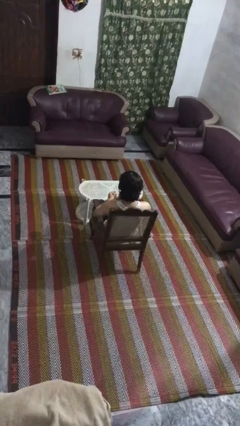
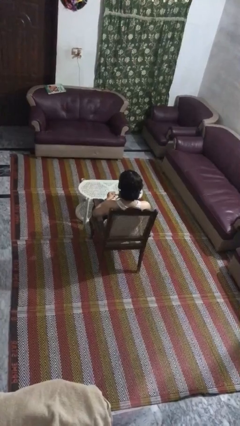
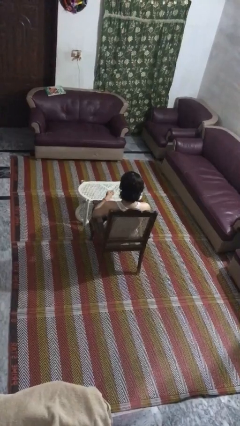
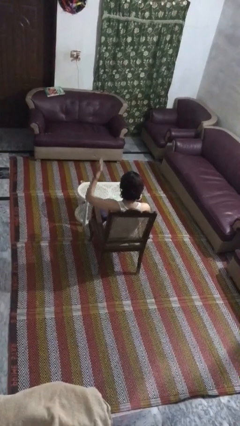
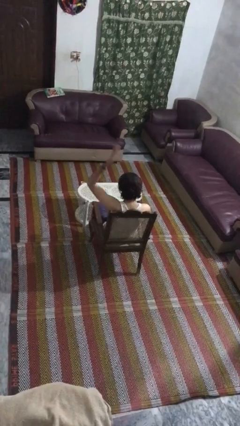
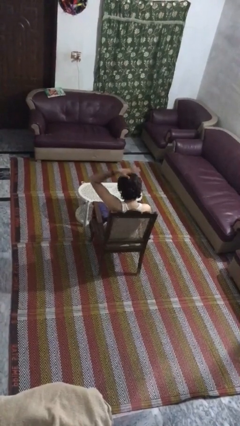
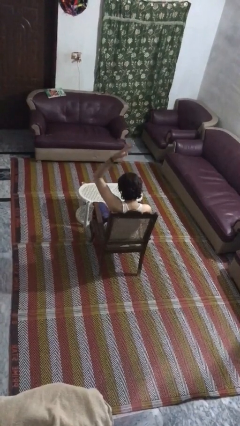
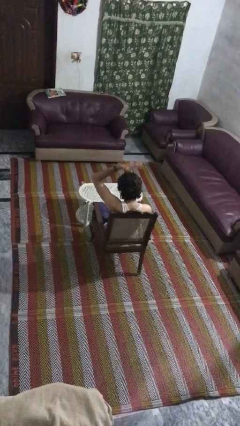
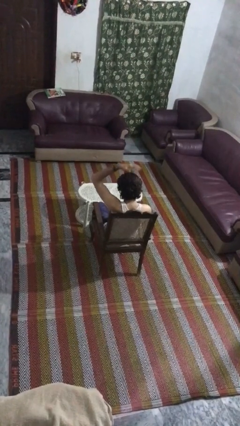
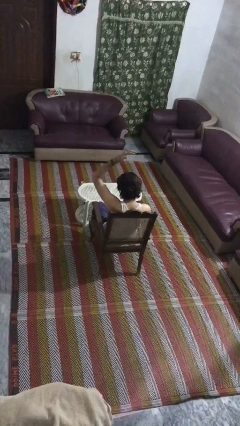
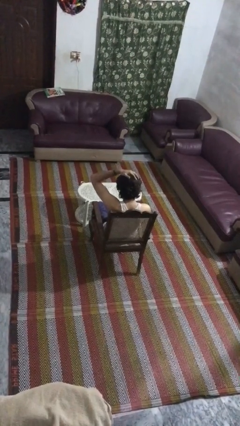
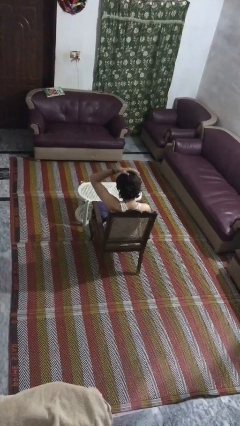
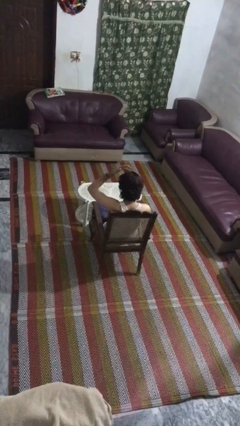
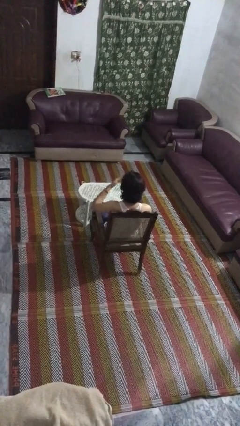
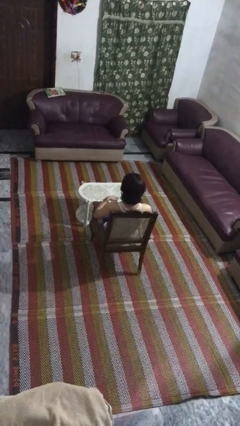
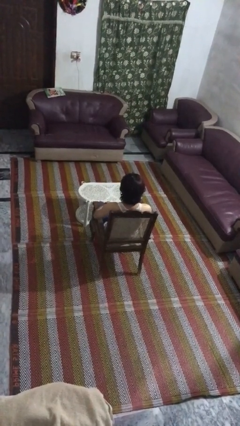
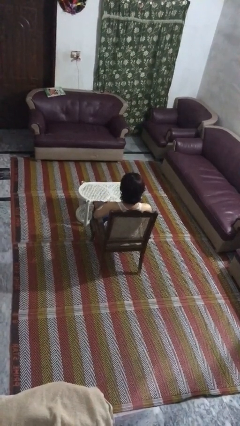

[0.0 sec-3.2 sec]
person pats head

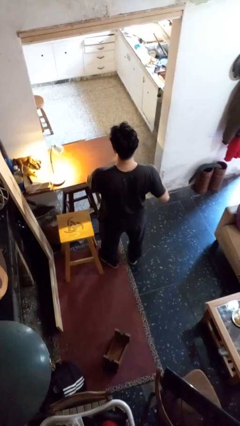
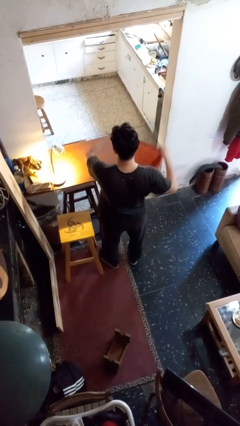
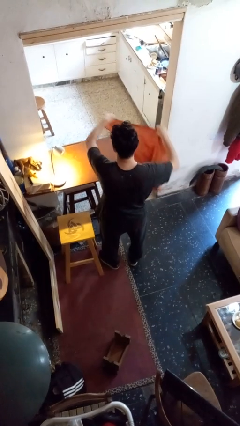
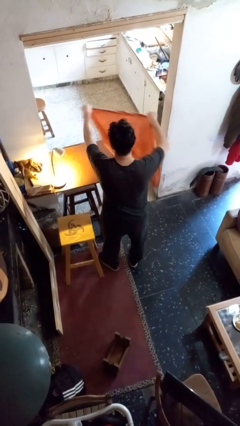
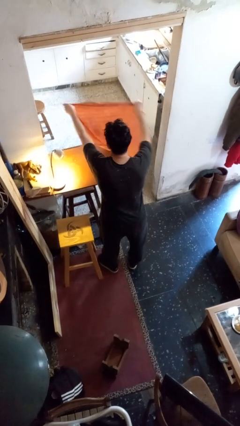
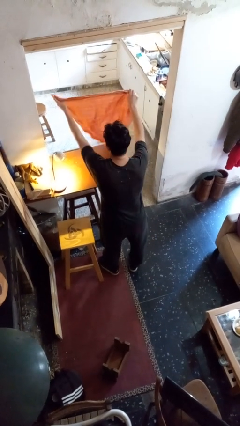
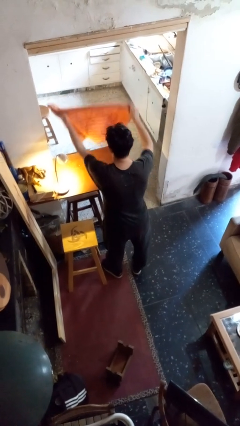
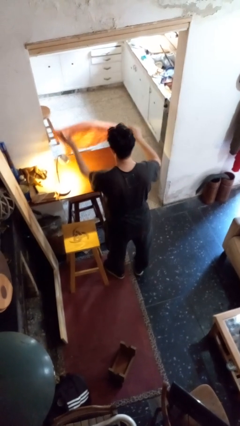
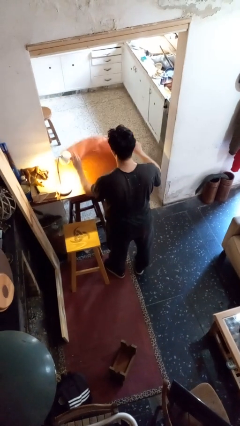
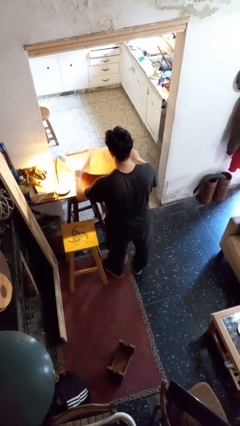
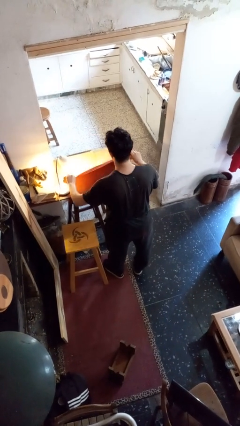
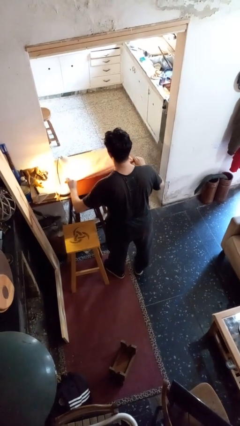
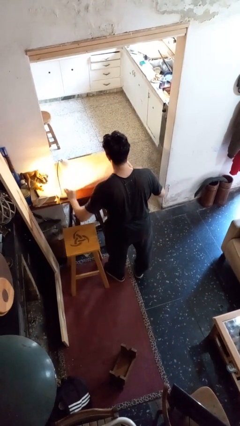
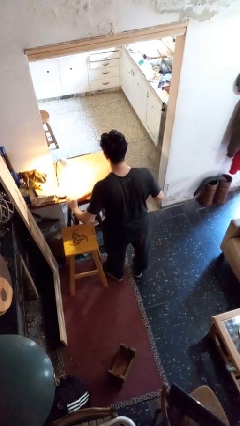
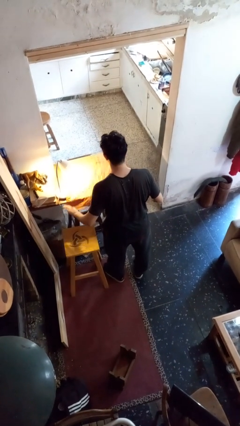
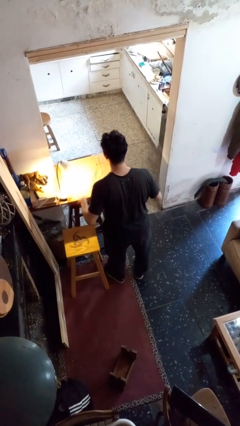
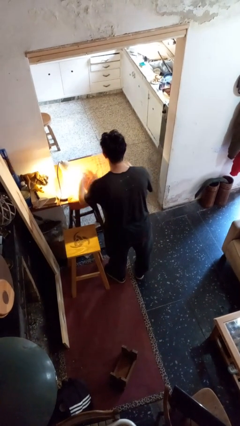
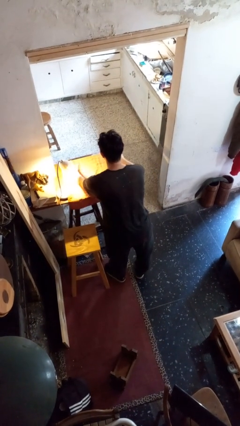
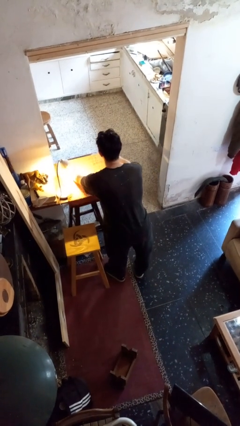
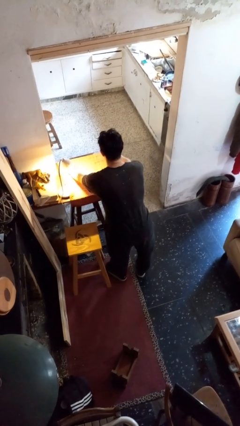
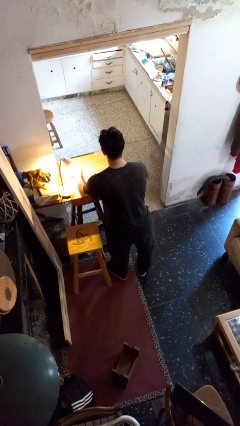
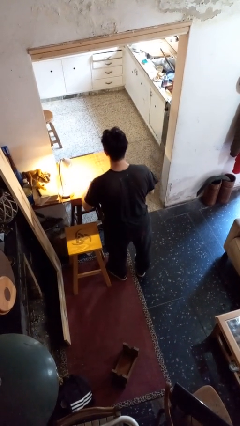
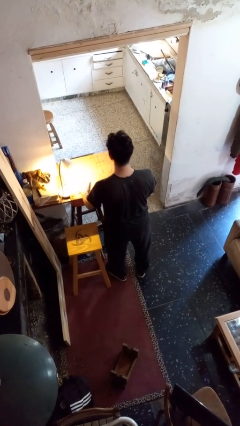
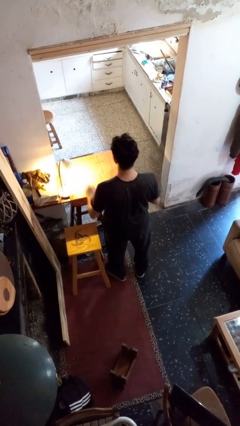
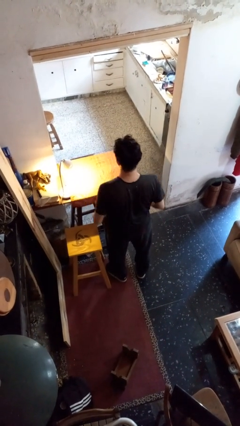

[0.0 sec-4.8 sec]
person spreads tablecloth

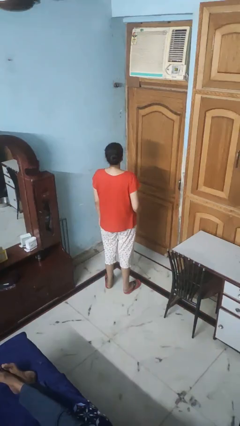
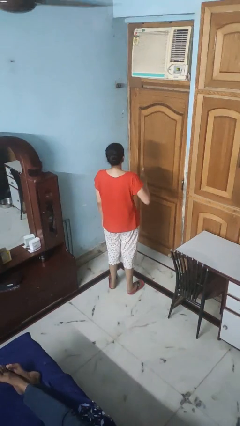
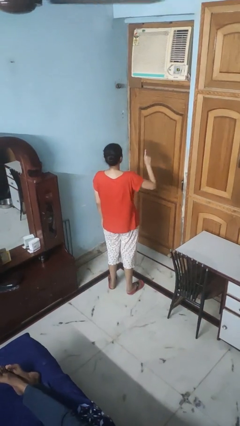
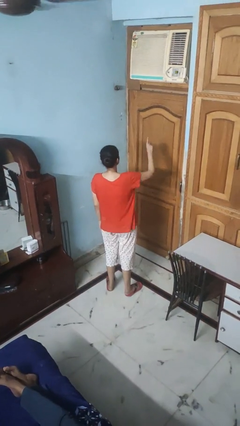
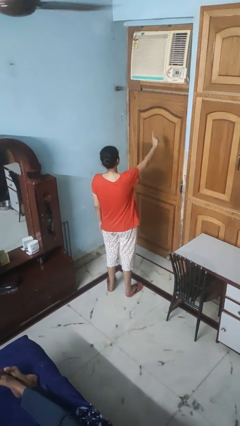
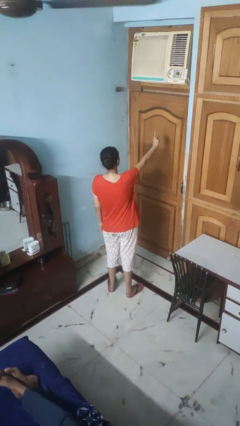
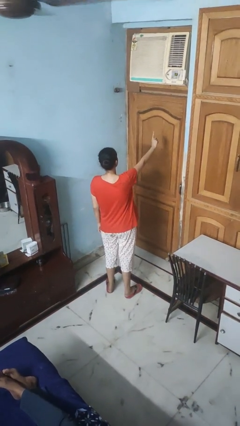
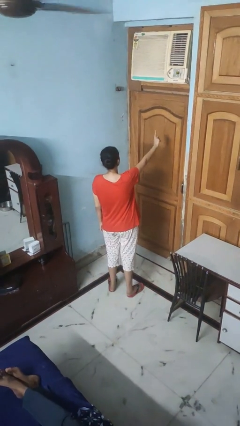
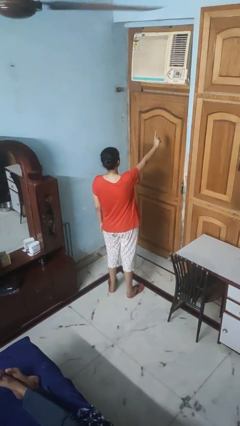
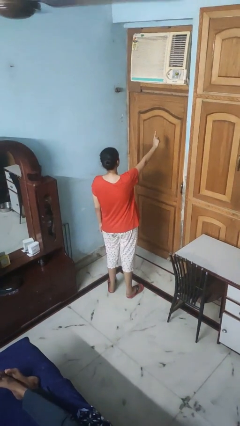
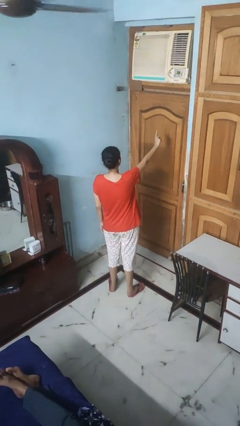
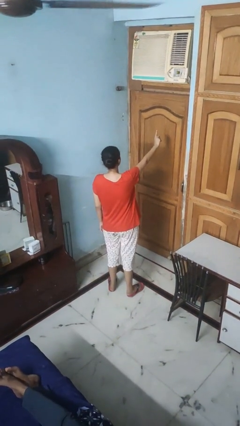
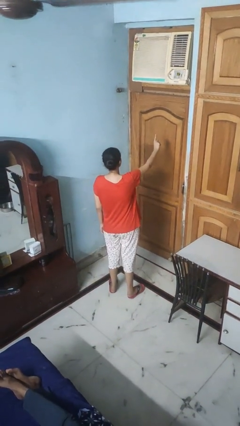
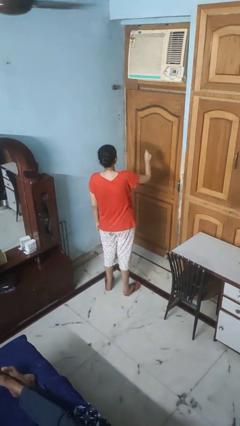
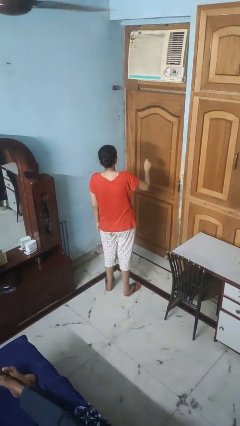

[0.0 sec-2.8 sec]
person gestures number one

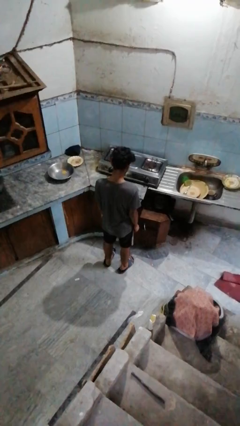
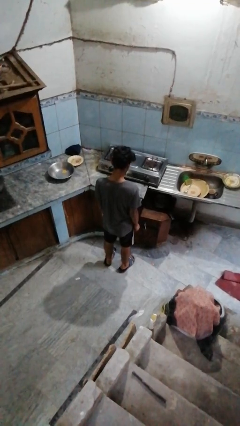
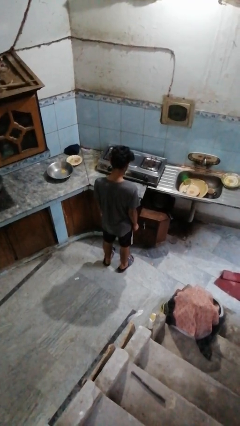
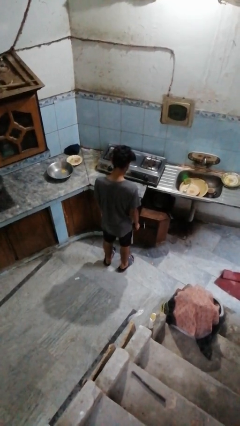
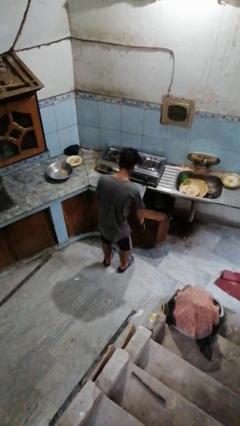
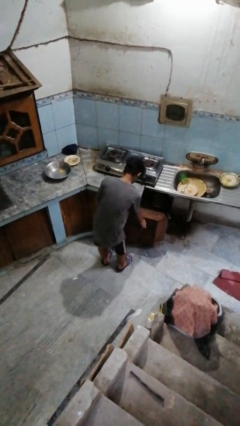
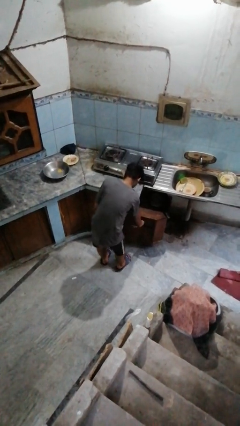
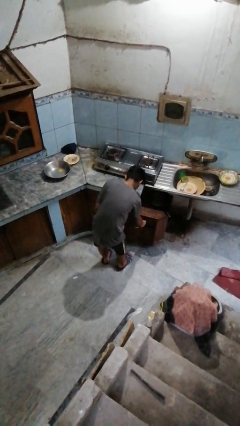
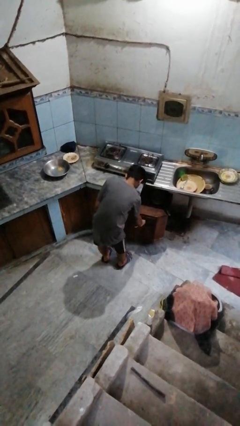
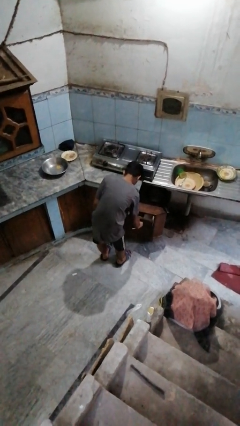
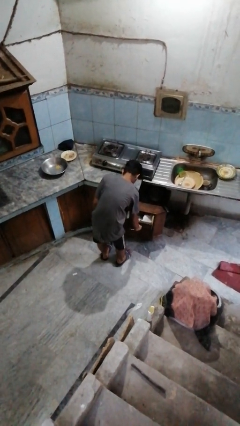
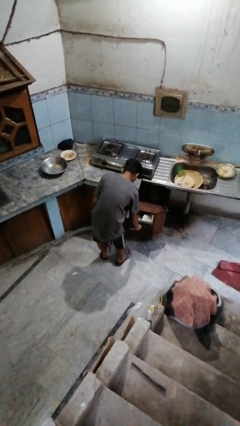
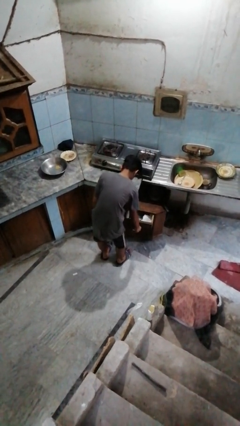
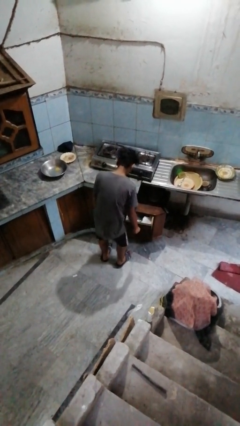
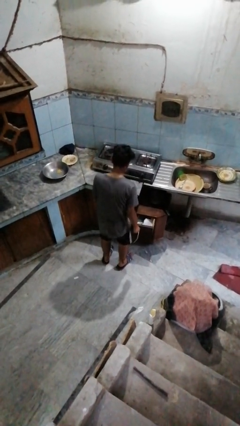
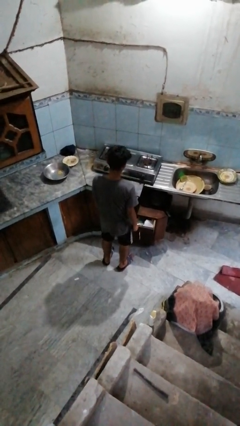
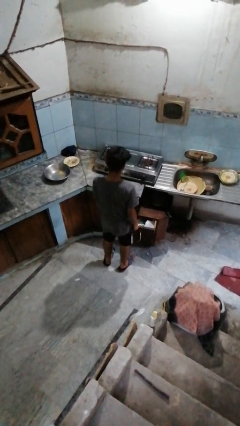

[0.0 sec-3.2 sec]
person opens kitchen drawer

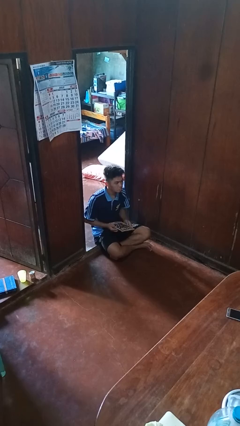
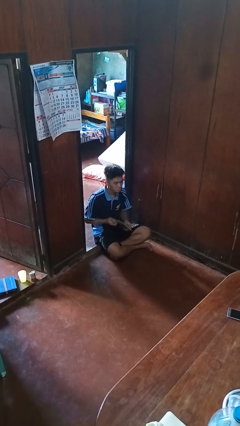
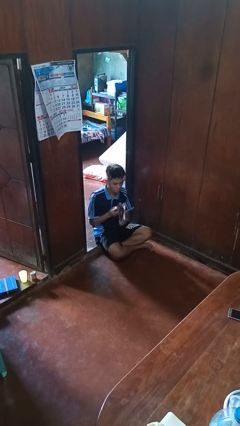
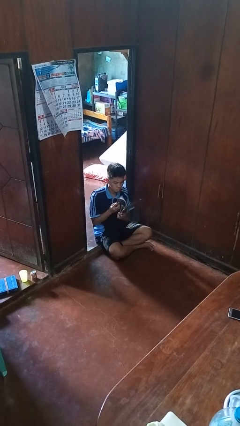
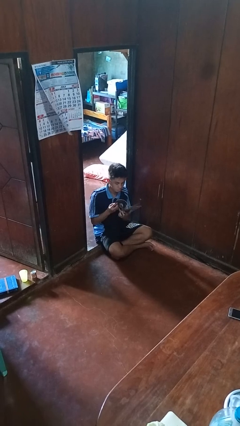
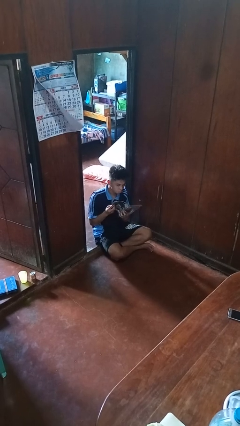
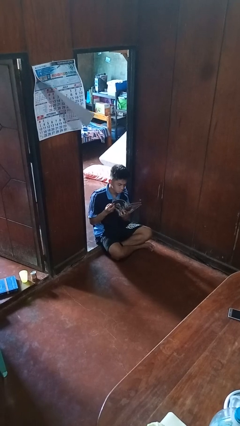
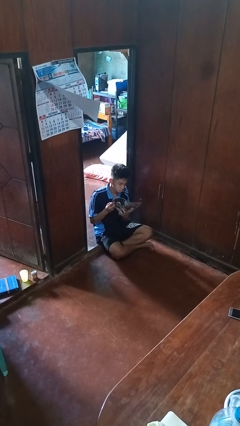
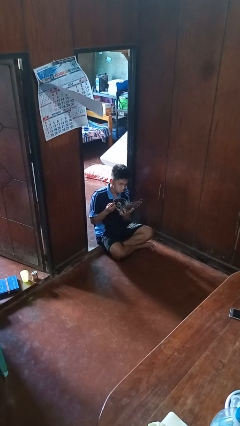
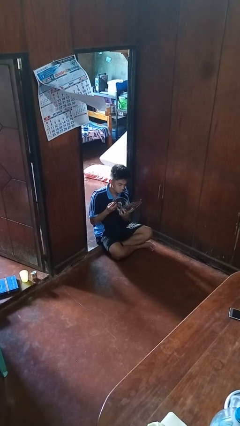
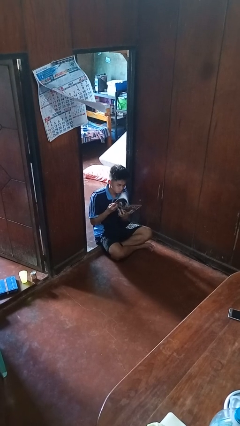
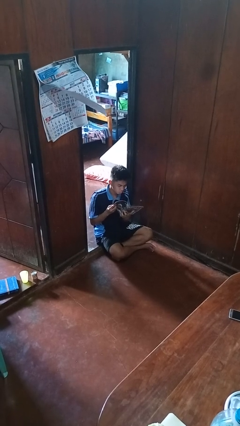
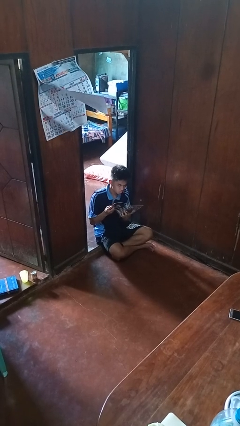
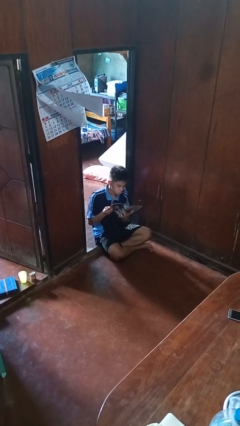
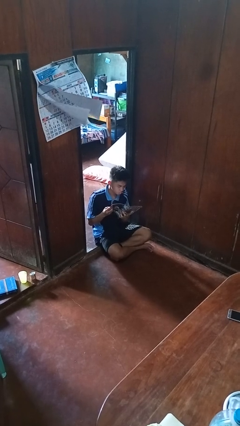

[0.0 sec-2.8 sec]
person reads magazine

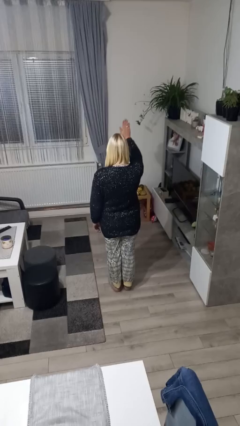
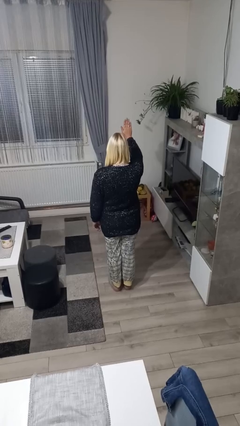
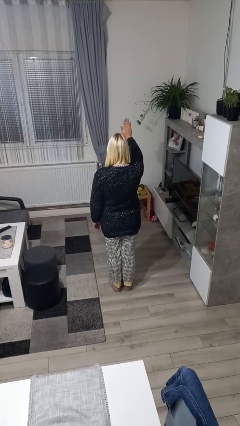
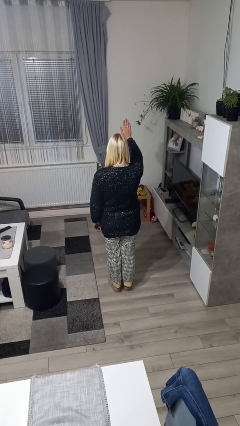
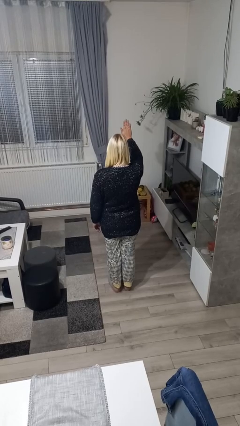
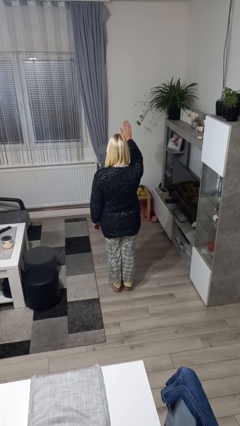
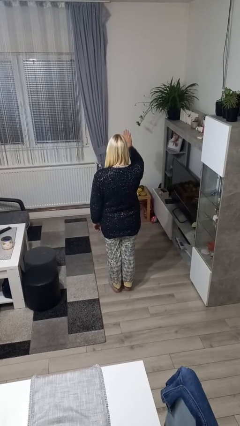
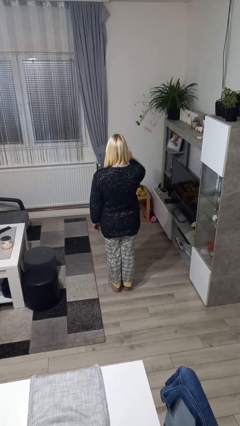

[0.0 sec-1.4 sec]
person gestures stop
